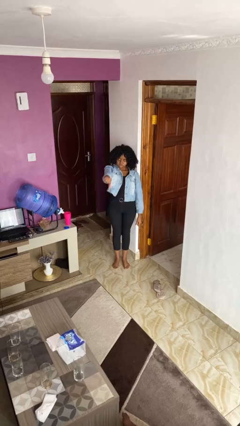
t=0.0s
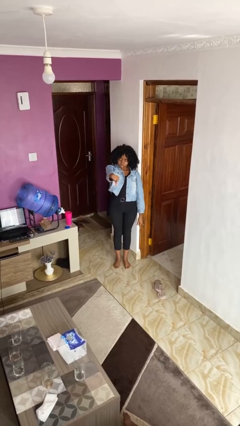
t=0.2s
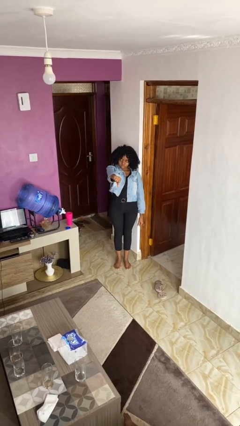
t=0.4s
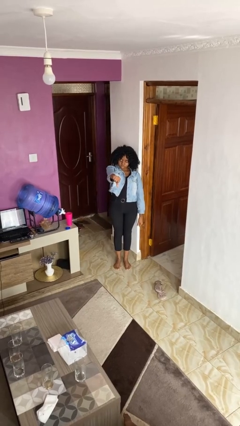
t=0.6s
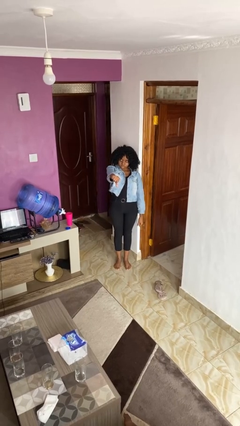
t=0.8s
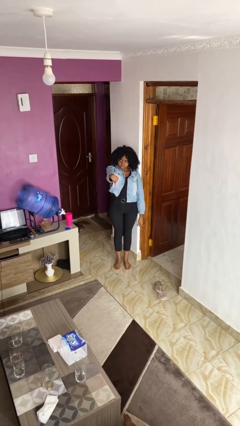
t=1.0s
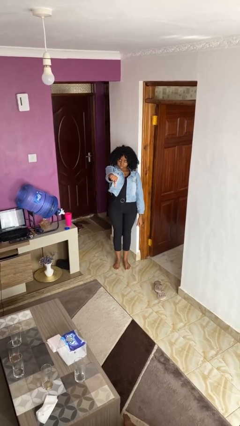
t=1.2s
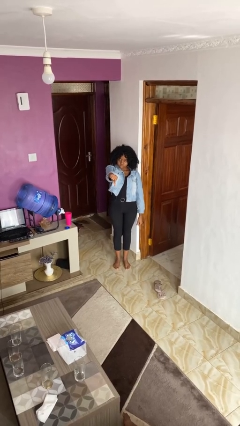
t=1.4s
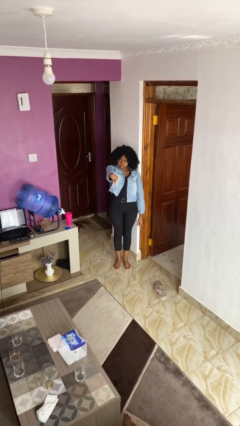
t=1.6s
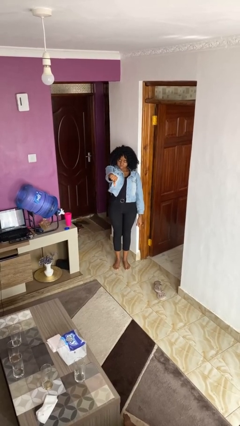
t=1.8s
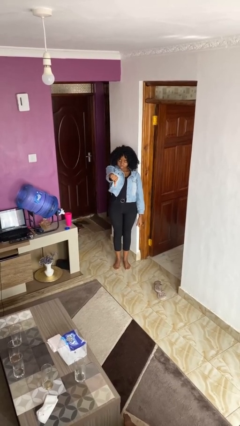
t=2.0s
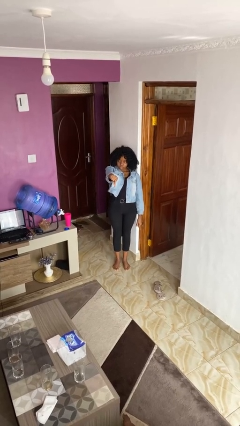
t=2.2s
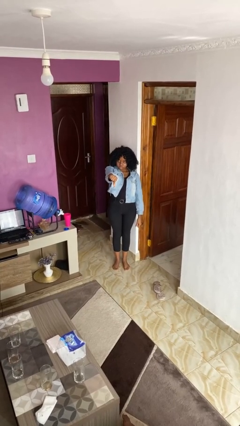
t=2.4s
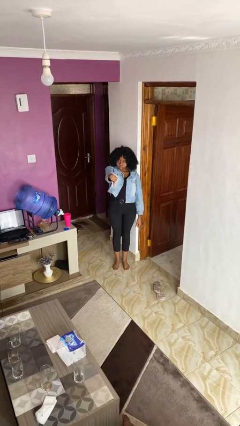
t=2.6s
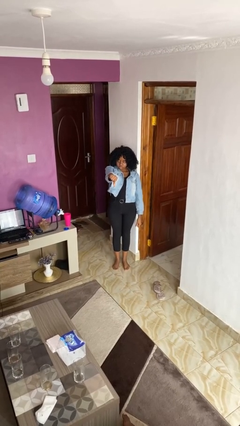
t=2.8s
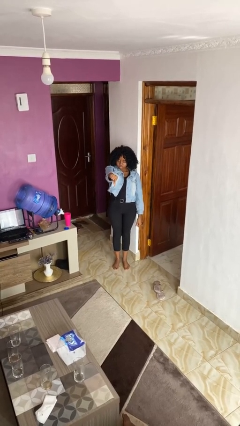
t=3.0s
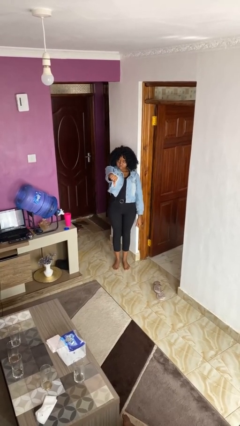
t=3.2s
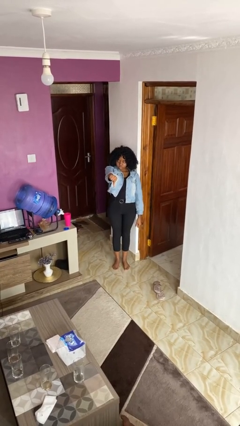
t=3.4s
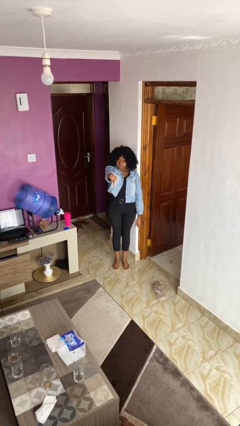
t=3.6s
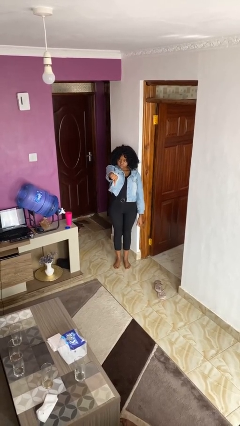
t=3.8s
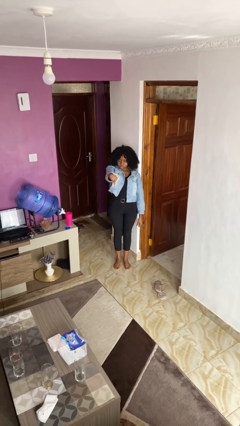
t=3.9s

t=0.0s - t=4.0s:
person gestures thumbs down

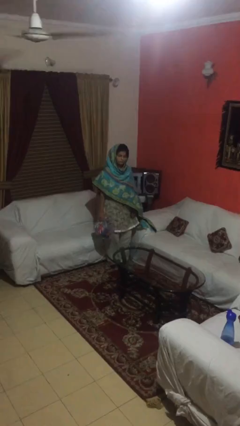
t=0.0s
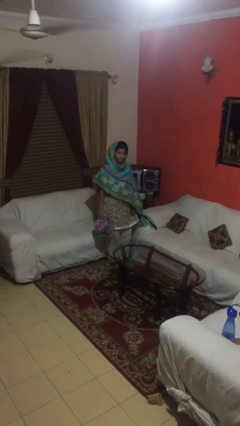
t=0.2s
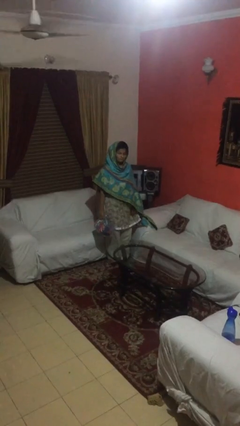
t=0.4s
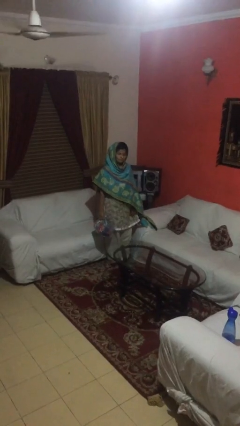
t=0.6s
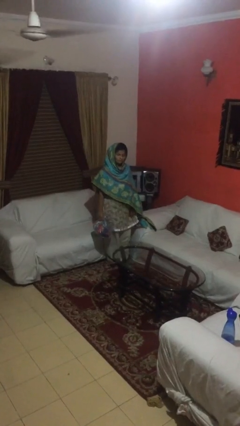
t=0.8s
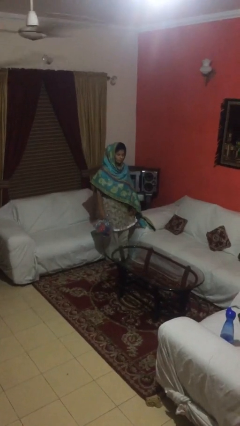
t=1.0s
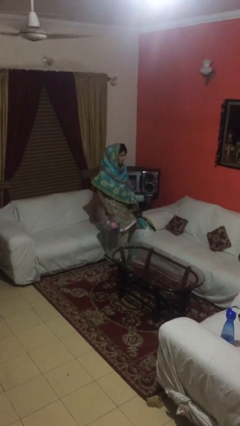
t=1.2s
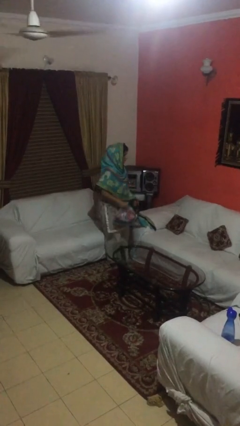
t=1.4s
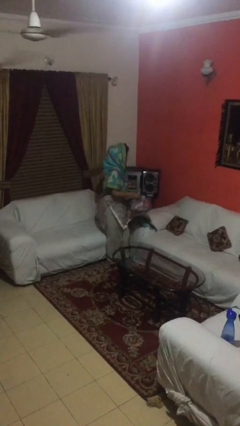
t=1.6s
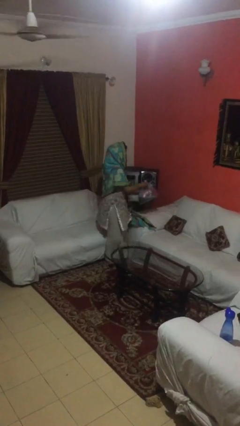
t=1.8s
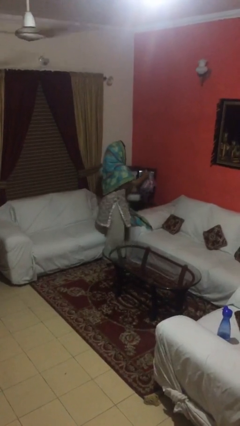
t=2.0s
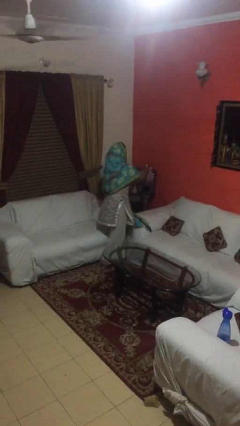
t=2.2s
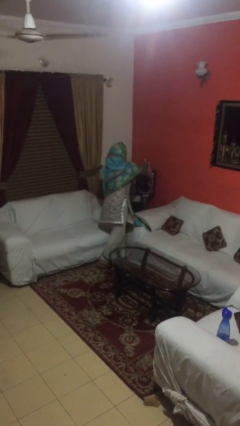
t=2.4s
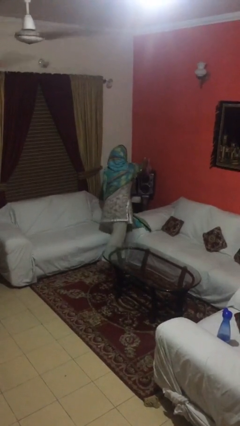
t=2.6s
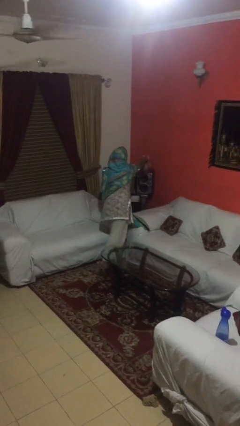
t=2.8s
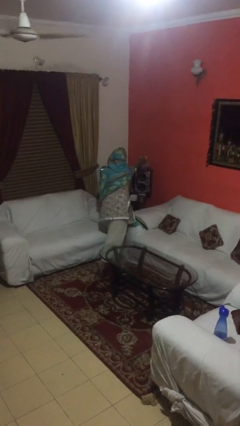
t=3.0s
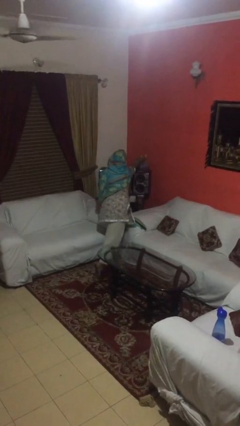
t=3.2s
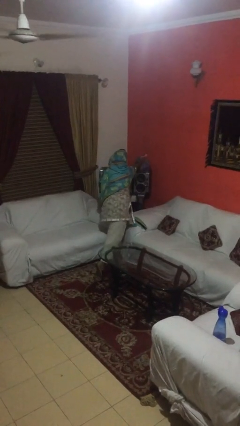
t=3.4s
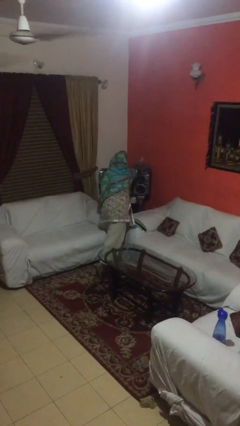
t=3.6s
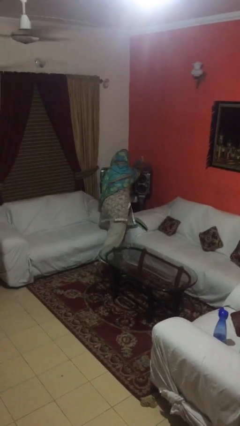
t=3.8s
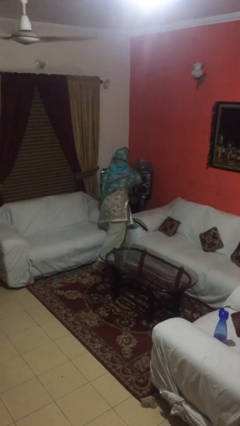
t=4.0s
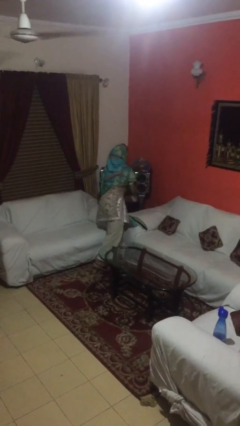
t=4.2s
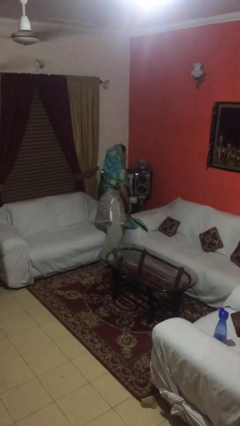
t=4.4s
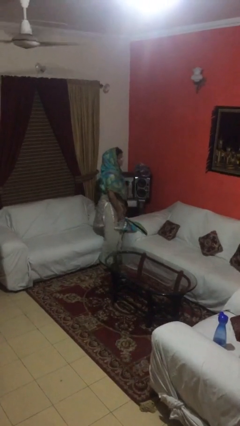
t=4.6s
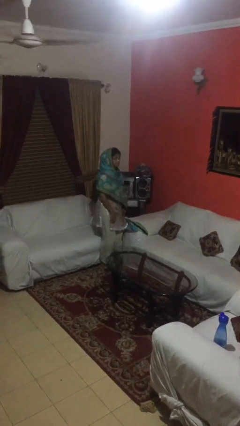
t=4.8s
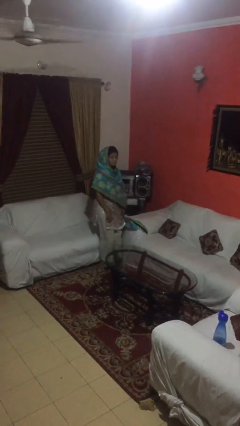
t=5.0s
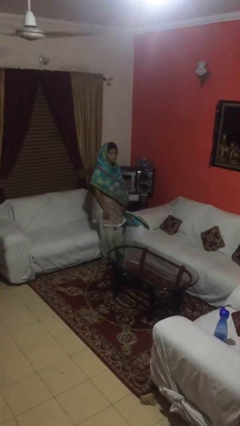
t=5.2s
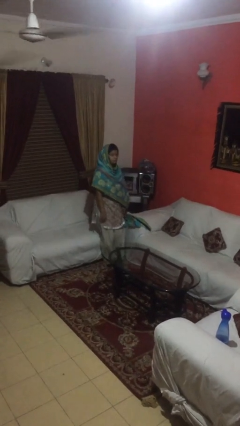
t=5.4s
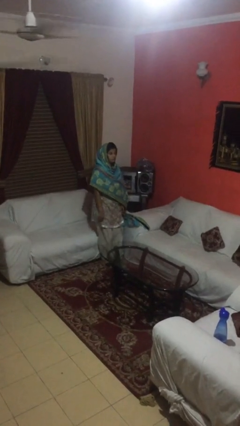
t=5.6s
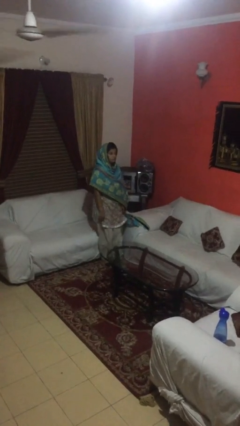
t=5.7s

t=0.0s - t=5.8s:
person puts down object on shelf

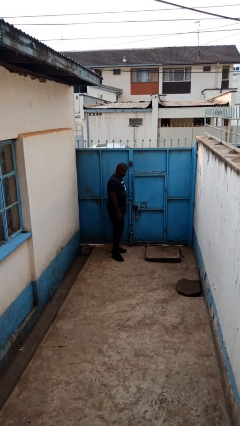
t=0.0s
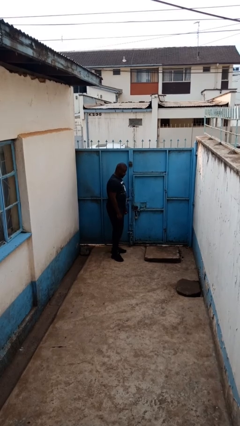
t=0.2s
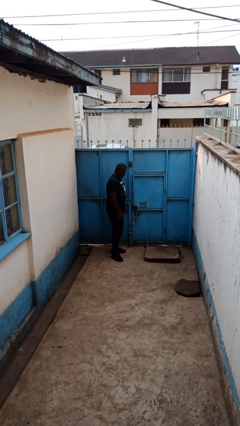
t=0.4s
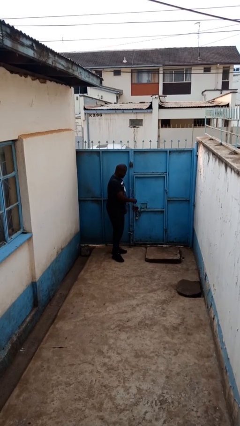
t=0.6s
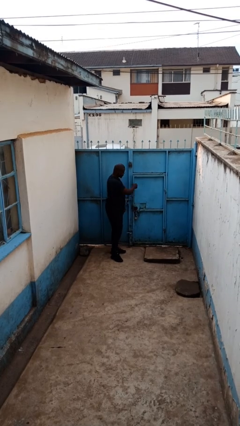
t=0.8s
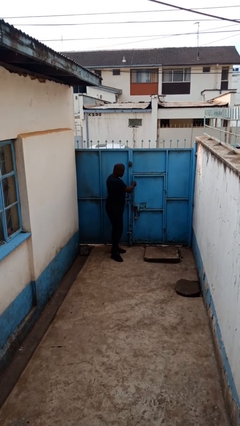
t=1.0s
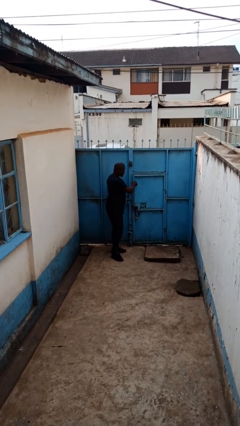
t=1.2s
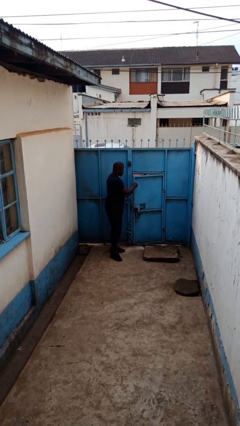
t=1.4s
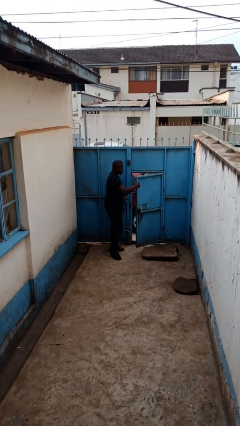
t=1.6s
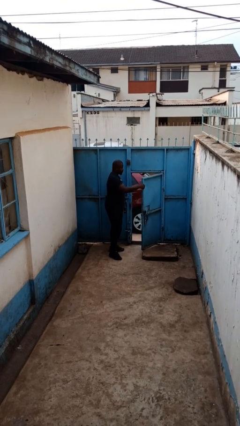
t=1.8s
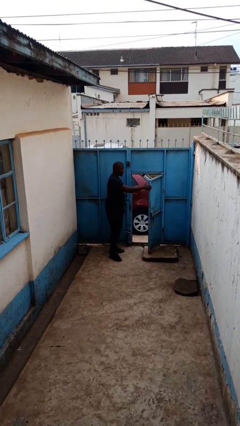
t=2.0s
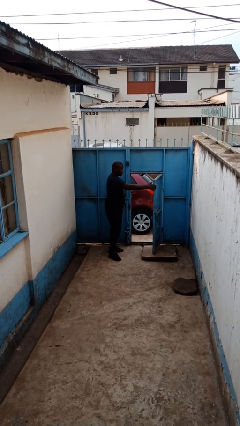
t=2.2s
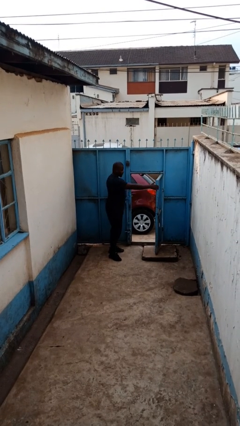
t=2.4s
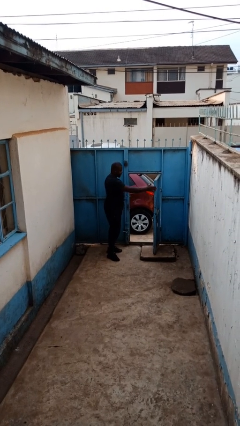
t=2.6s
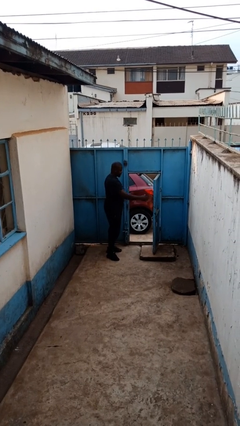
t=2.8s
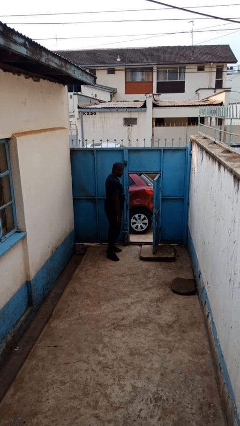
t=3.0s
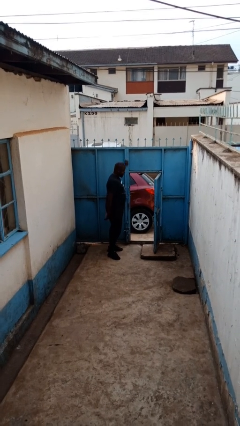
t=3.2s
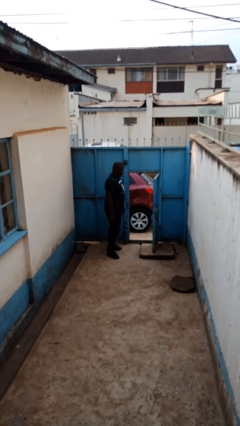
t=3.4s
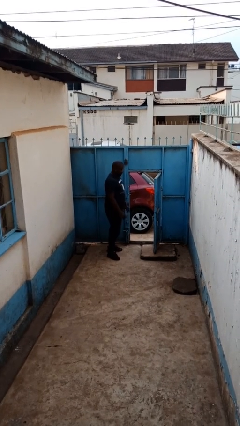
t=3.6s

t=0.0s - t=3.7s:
person opens gate

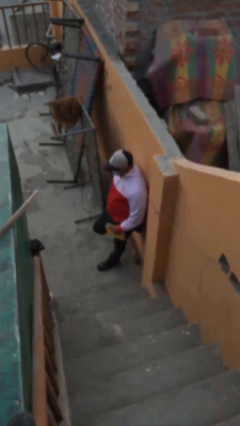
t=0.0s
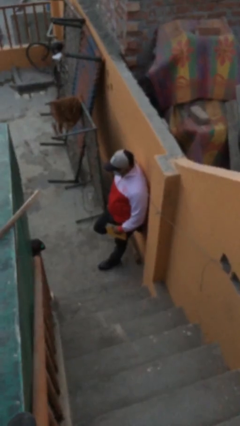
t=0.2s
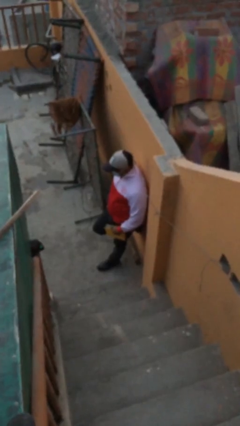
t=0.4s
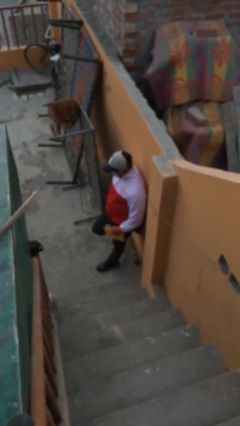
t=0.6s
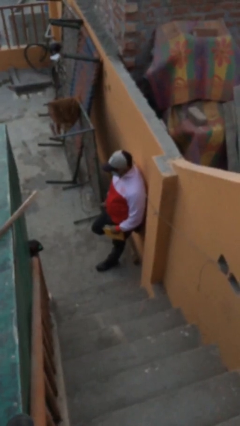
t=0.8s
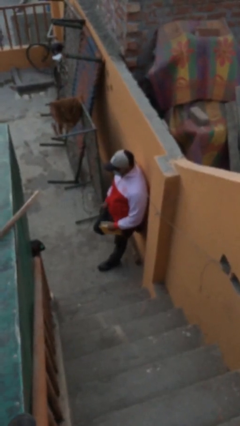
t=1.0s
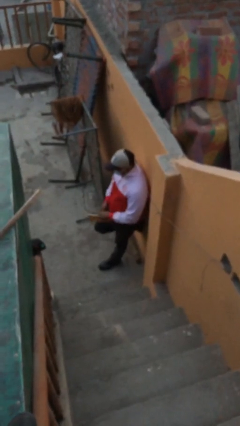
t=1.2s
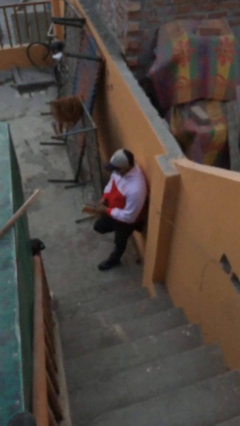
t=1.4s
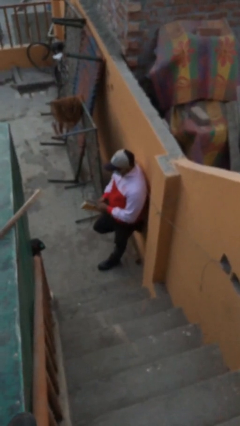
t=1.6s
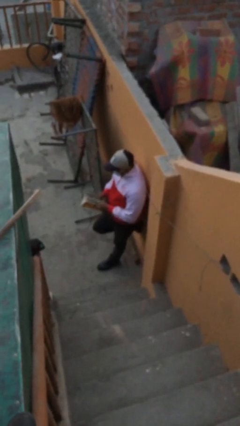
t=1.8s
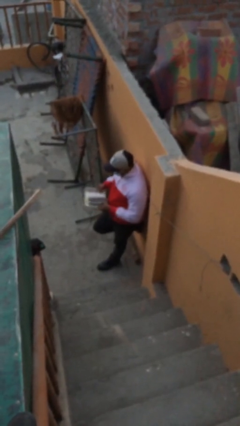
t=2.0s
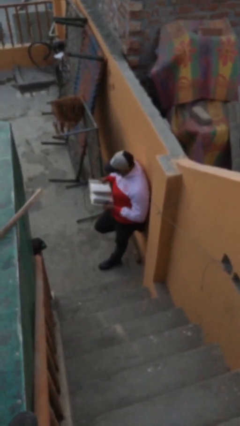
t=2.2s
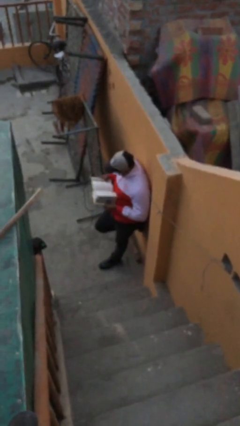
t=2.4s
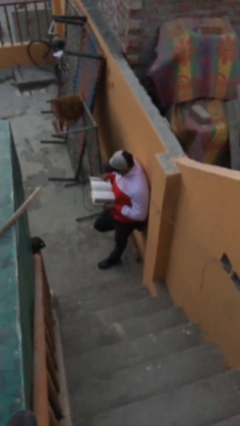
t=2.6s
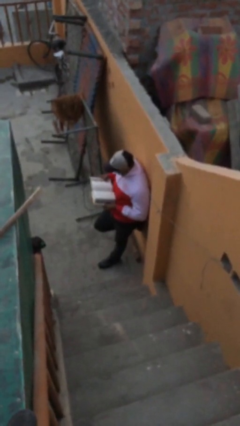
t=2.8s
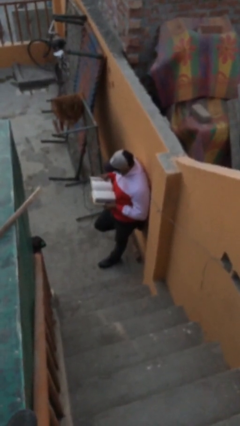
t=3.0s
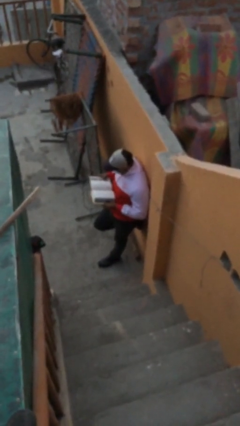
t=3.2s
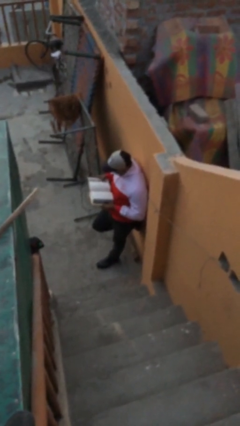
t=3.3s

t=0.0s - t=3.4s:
person reads document

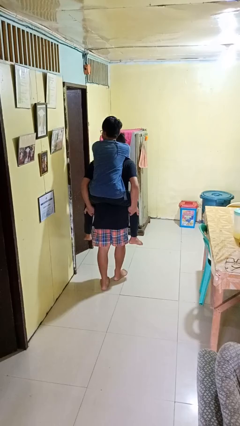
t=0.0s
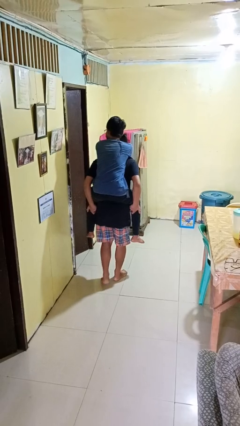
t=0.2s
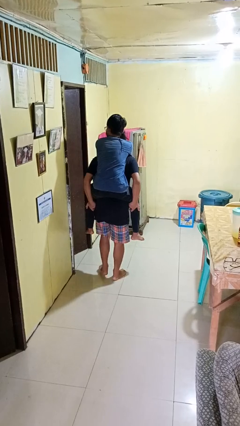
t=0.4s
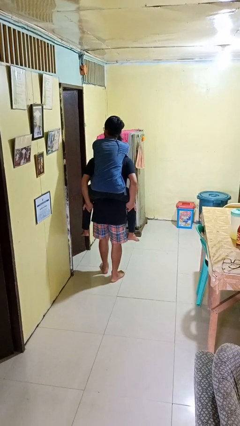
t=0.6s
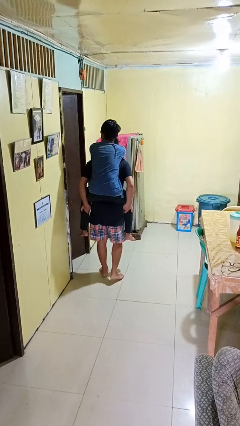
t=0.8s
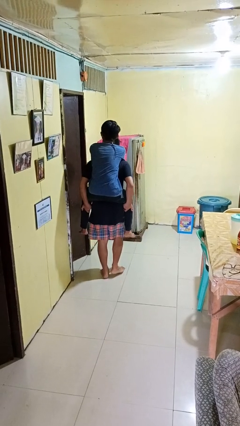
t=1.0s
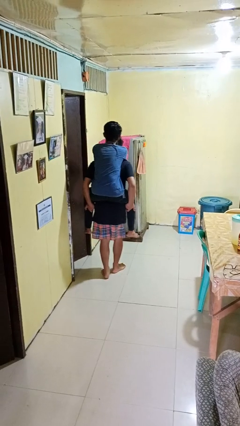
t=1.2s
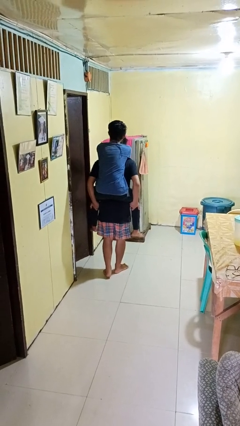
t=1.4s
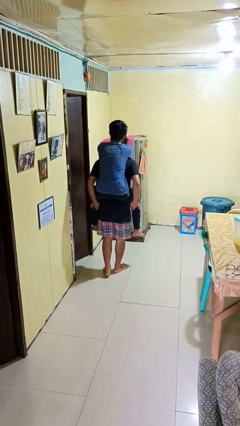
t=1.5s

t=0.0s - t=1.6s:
person carries person on back
